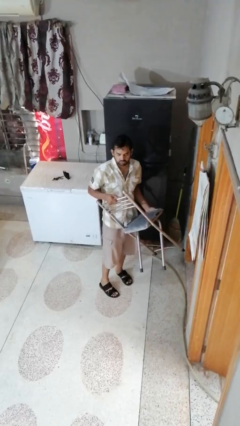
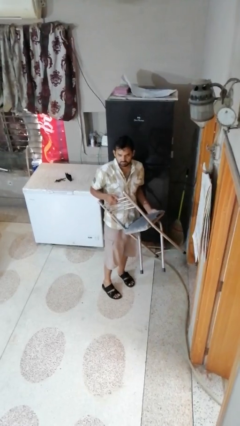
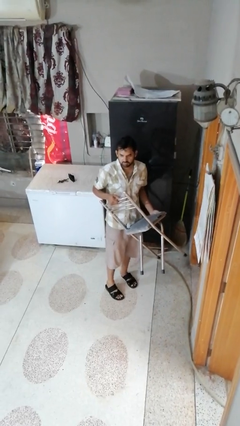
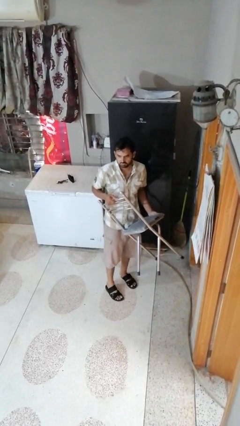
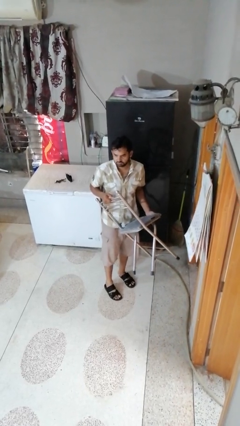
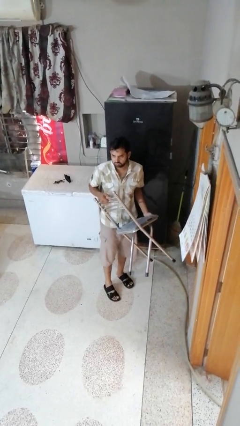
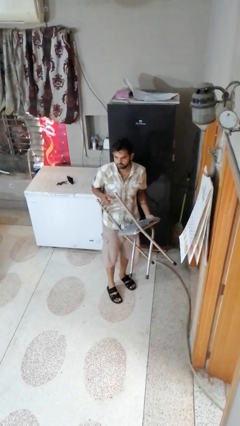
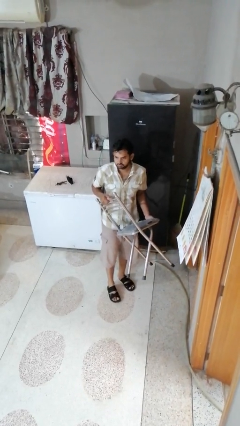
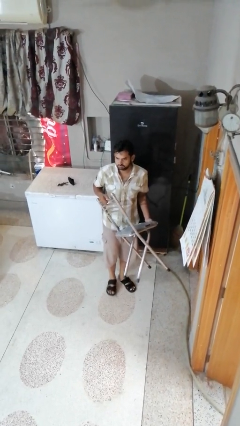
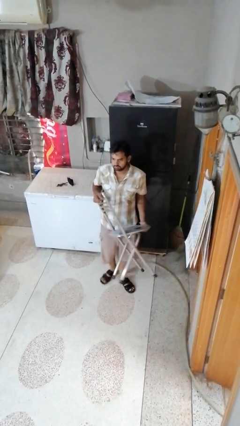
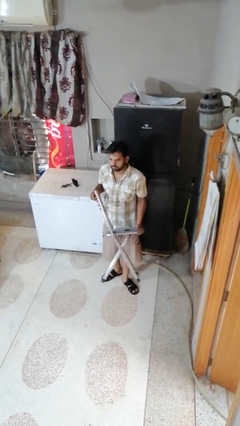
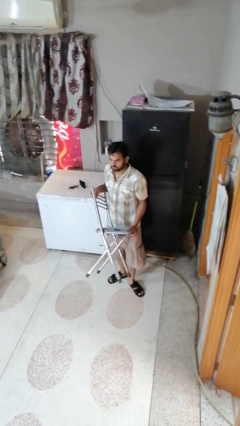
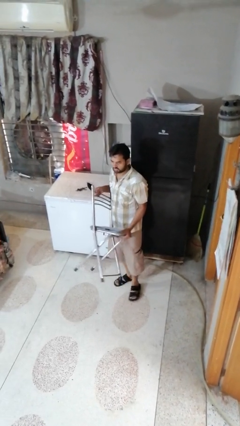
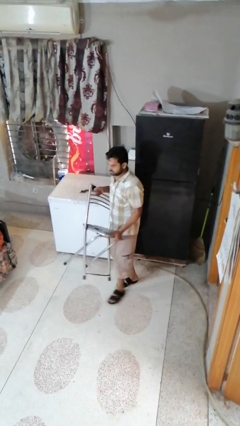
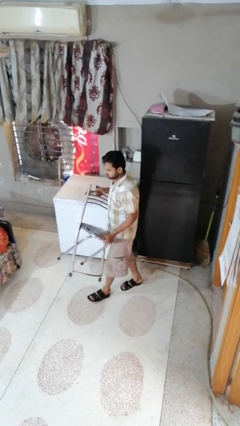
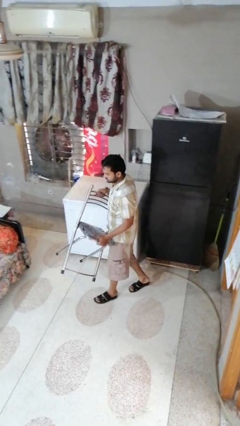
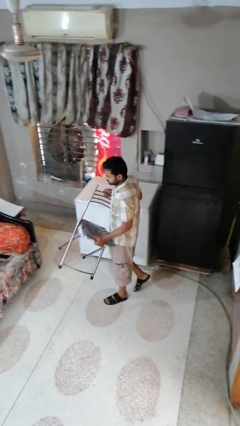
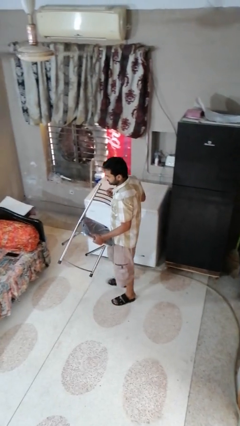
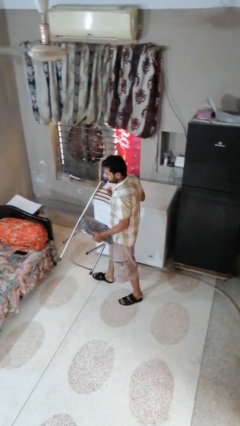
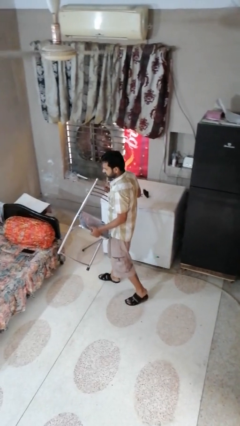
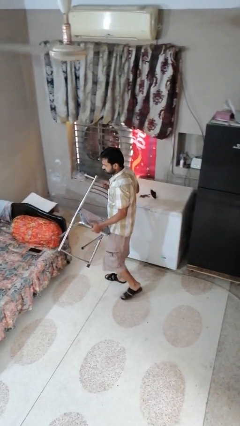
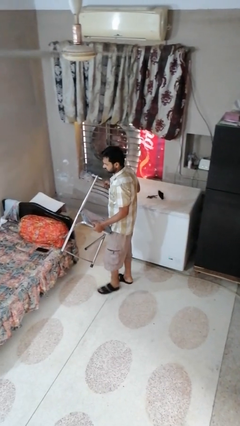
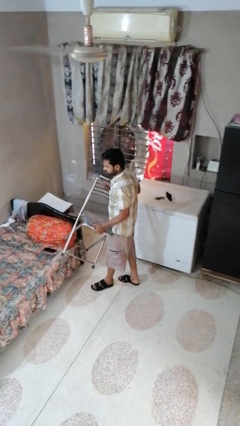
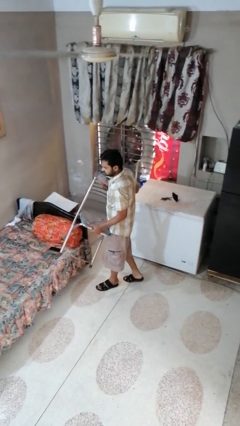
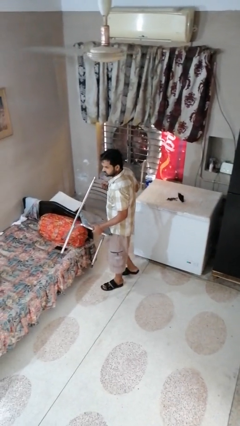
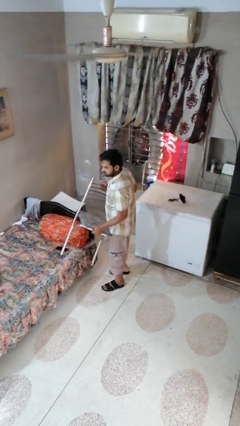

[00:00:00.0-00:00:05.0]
person carries furniture

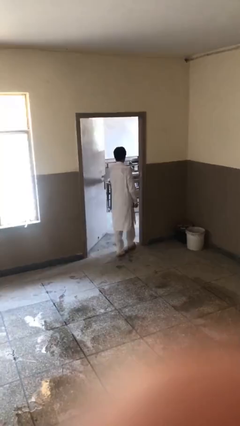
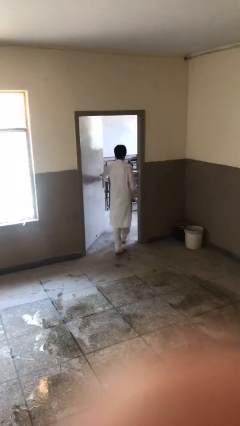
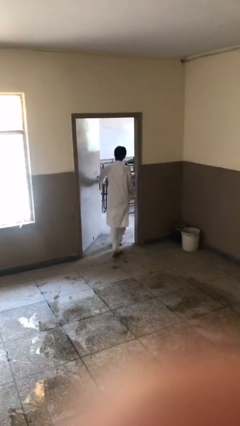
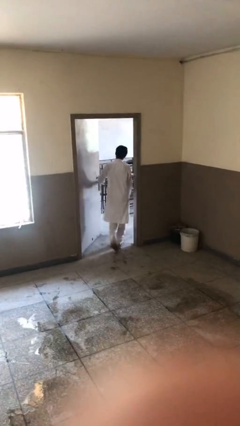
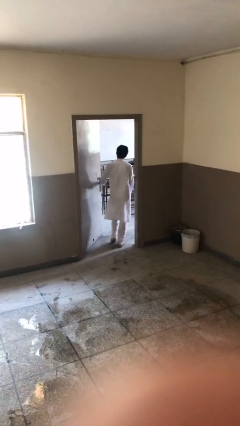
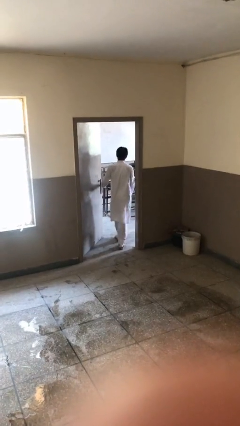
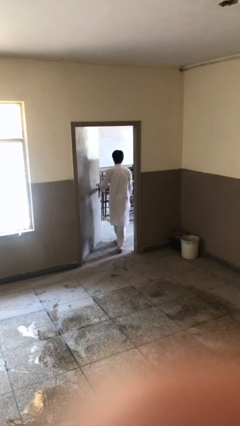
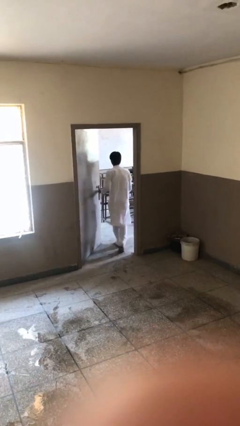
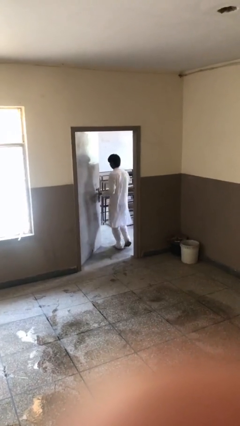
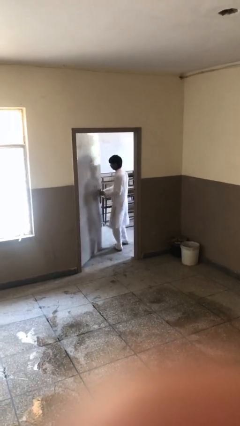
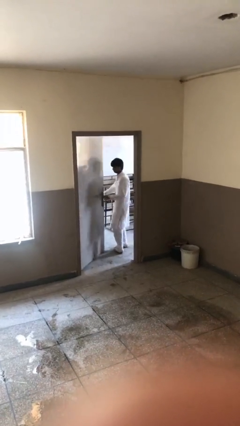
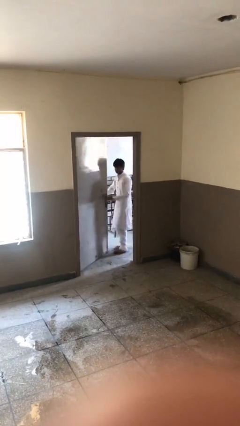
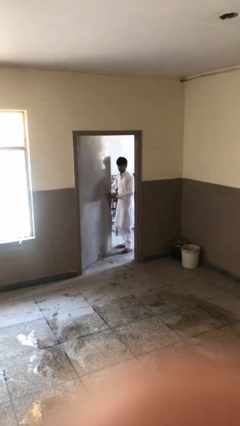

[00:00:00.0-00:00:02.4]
person exits scene through structure

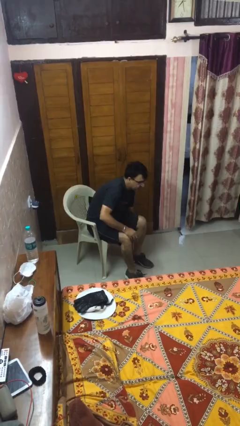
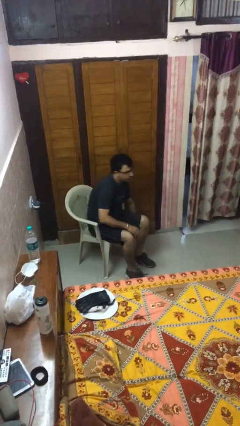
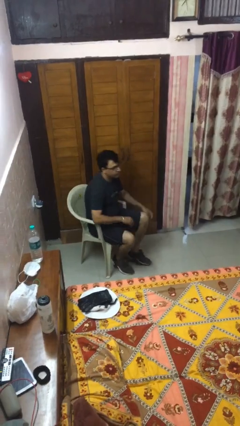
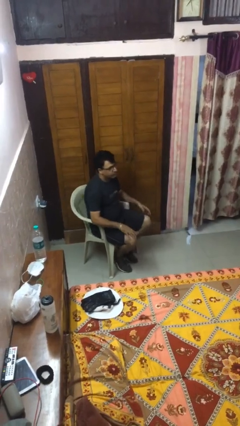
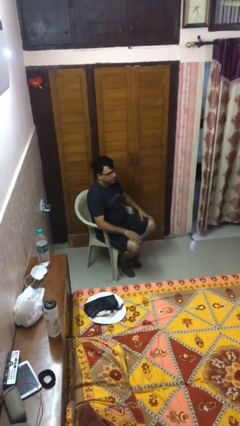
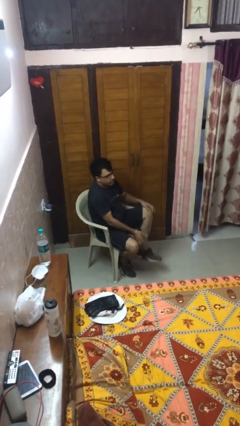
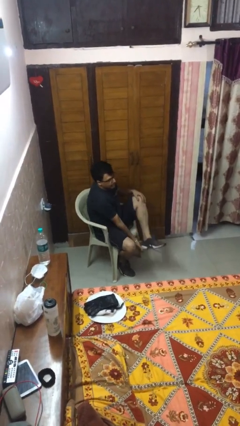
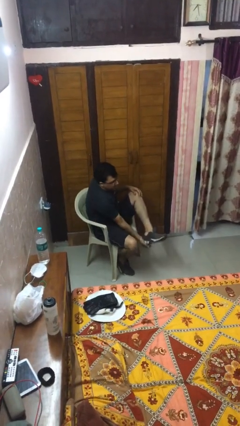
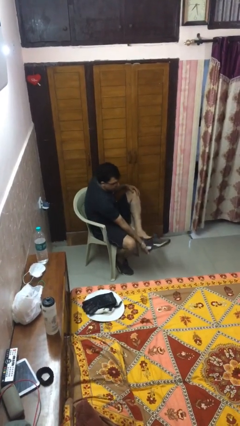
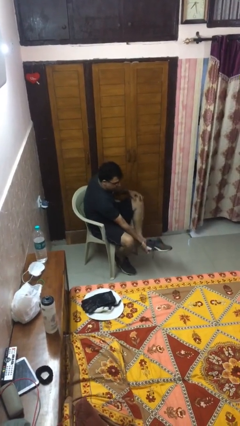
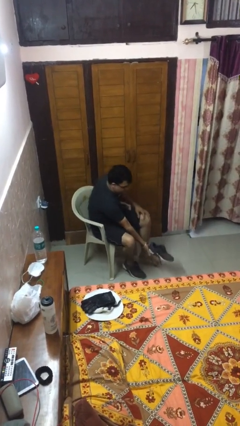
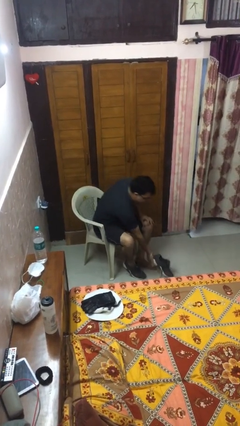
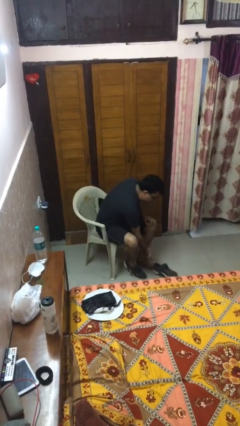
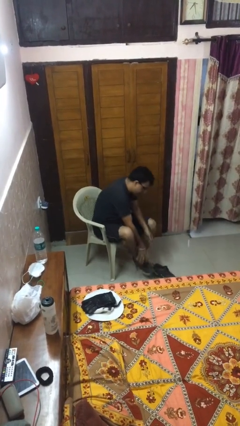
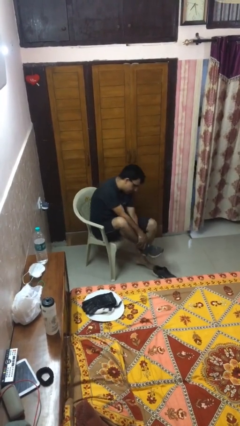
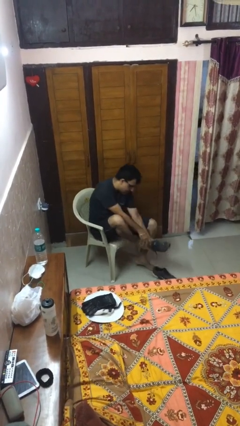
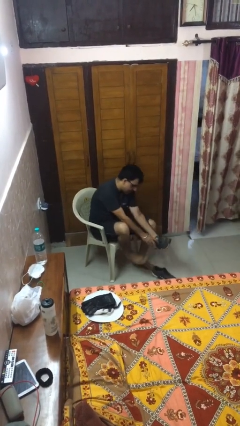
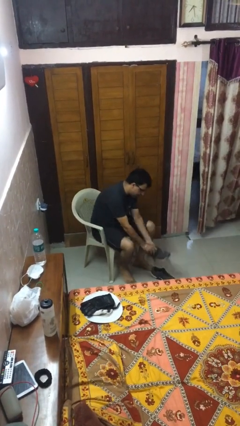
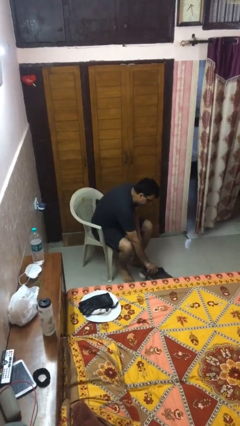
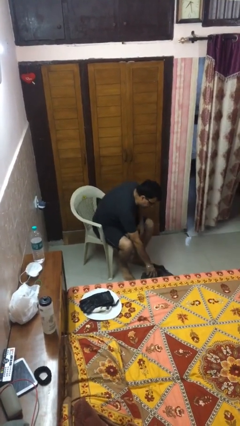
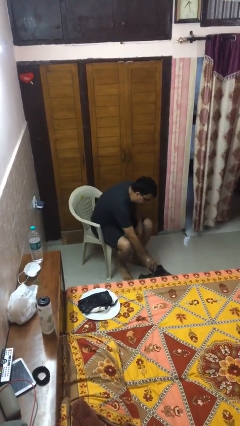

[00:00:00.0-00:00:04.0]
person takes off shoes

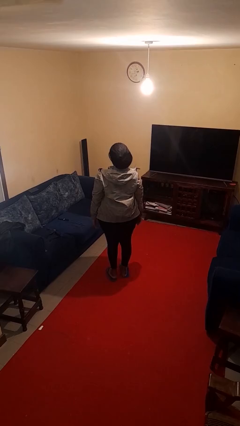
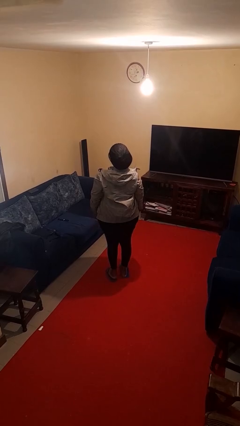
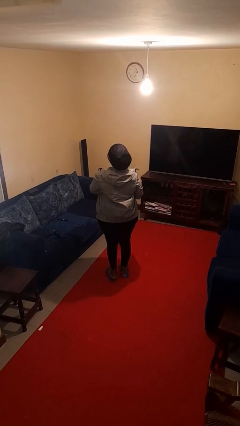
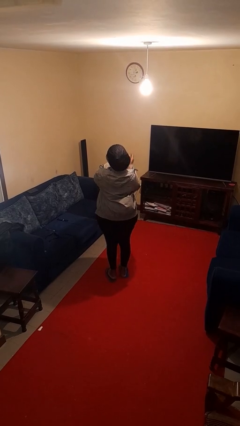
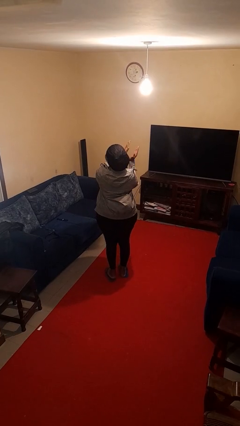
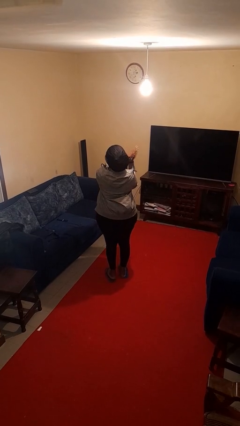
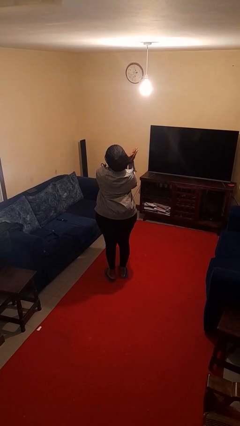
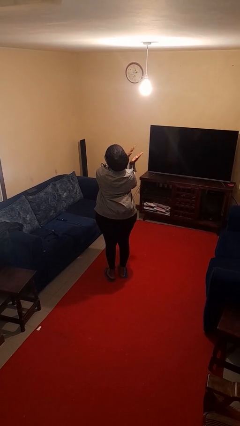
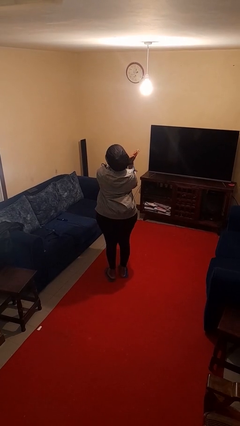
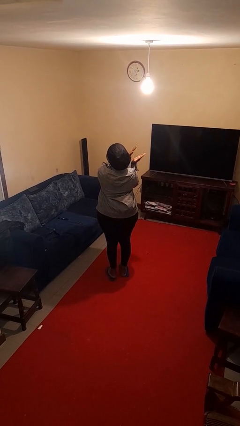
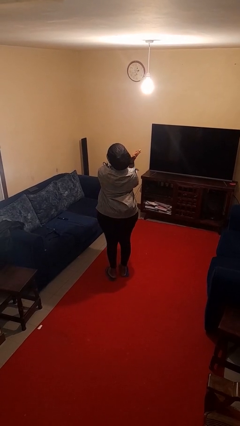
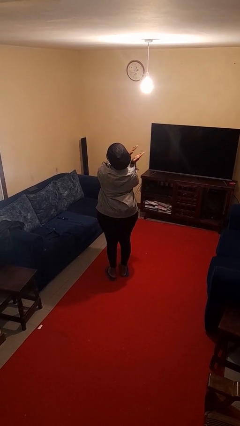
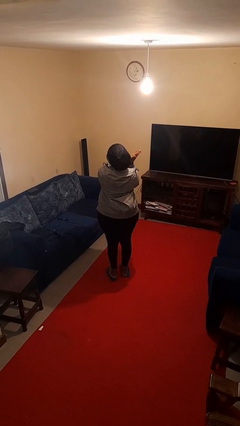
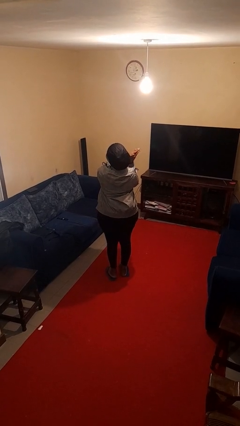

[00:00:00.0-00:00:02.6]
person claps hands

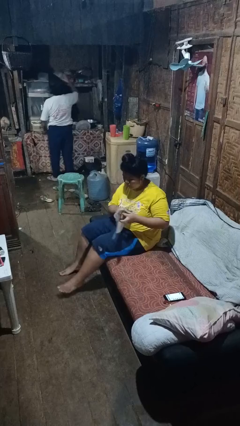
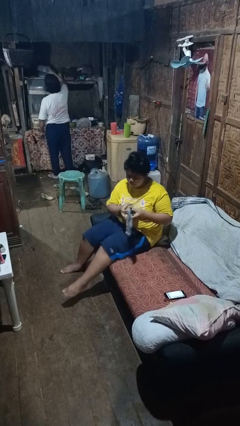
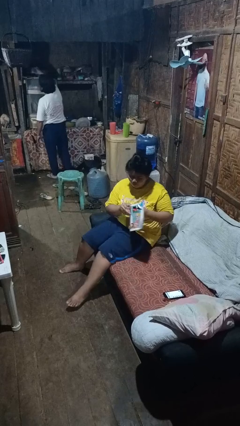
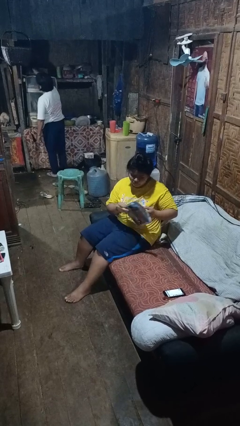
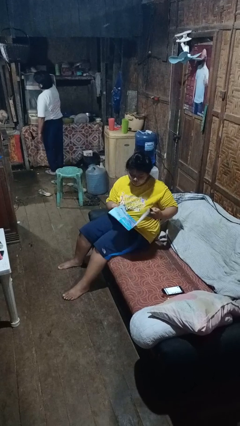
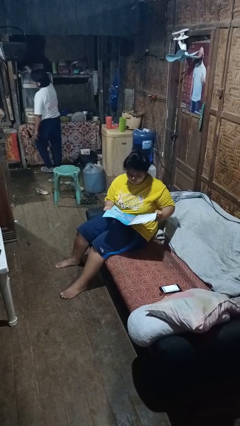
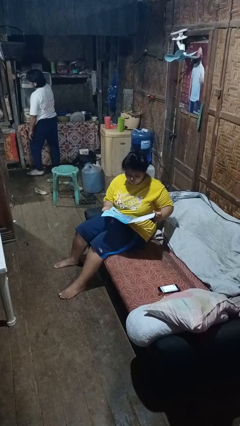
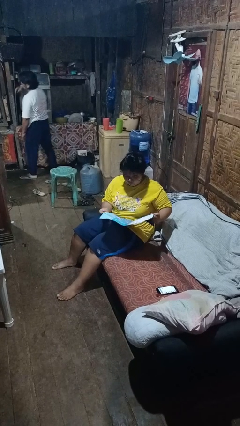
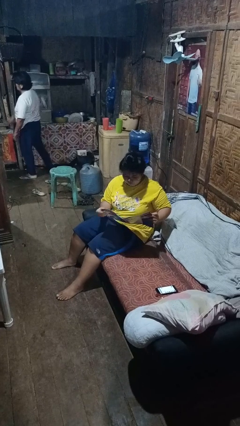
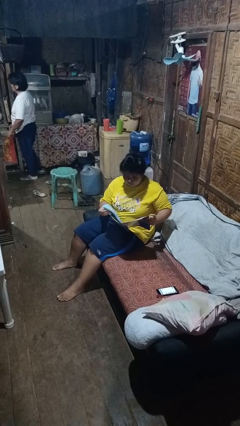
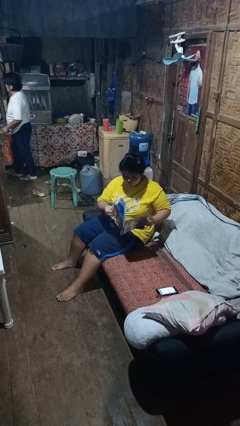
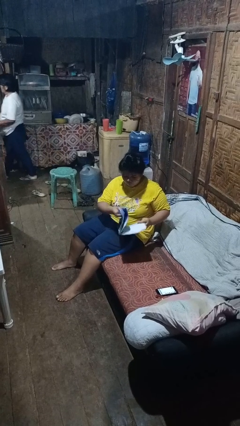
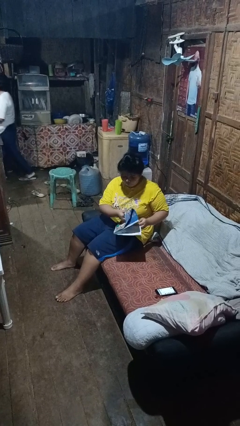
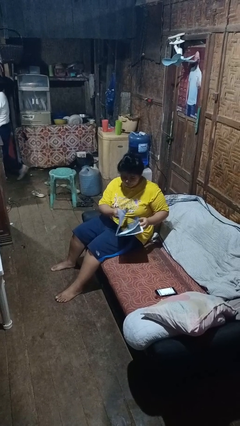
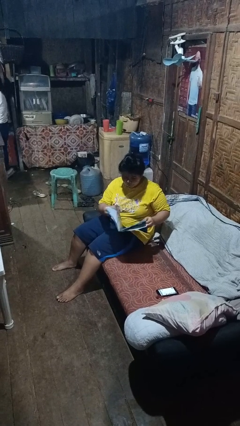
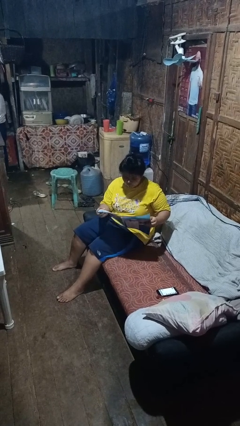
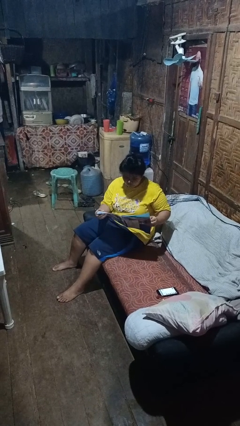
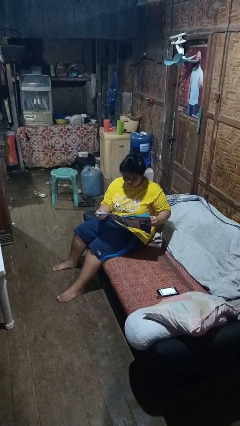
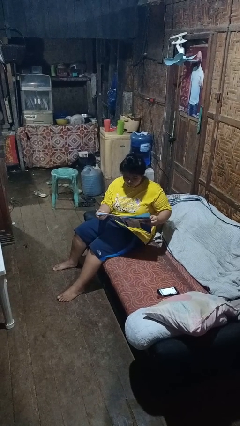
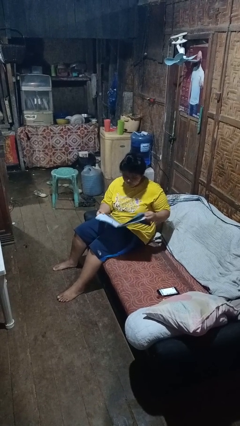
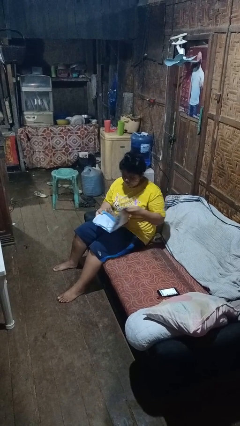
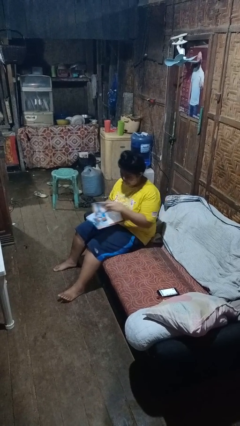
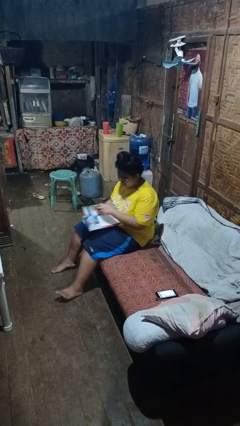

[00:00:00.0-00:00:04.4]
person reads magazine
